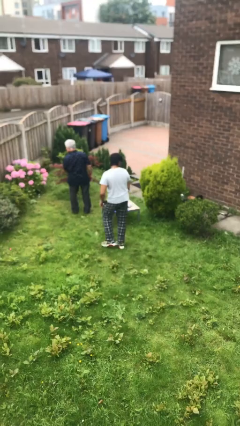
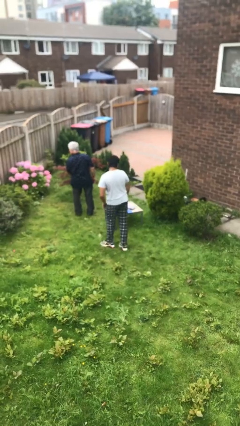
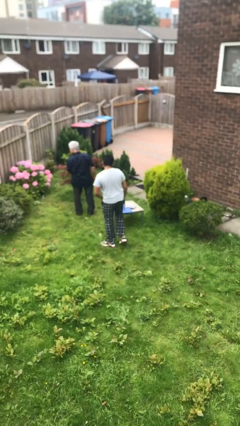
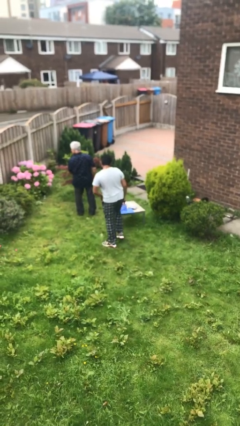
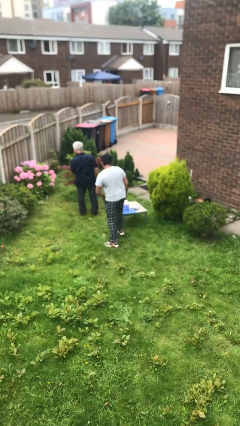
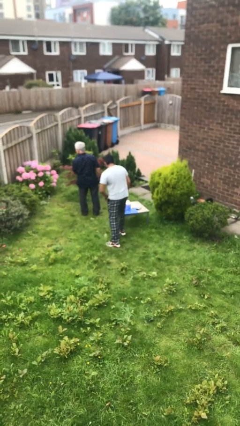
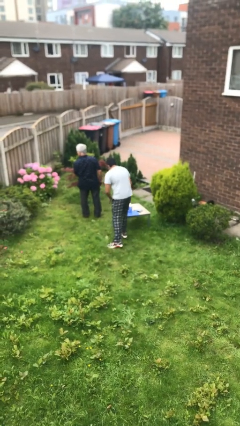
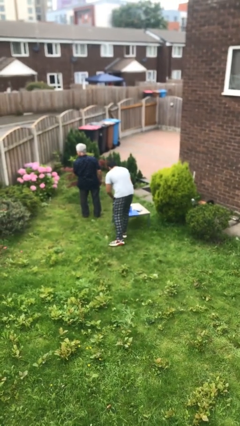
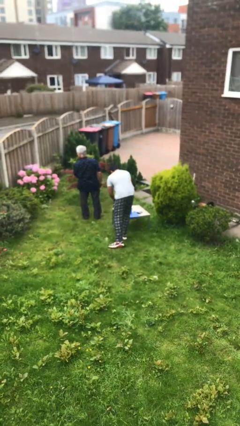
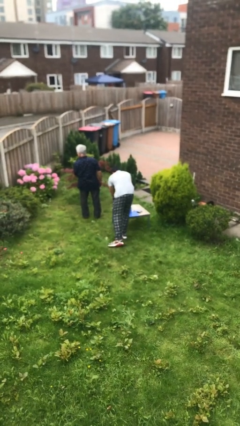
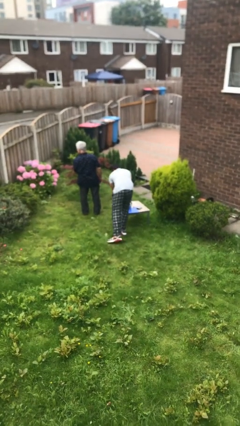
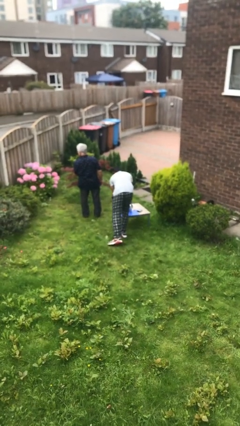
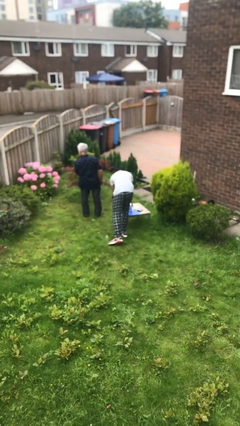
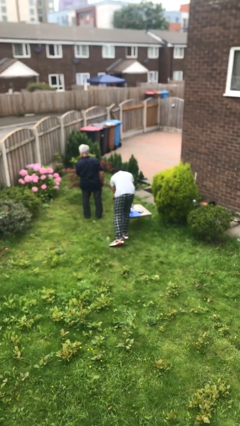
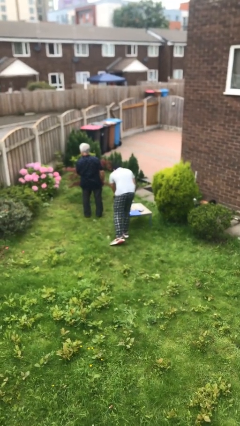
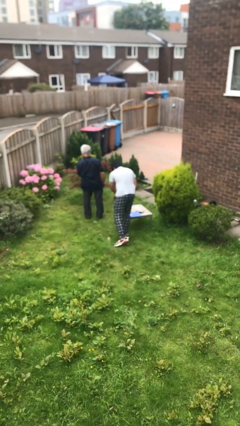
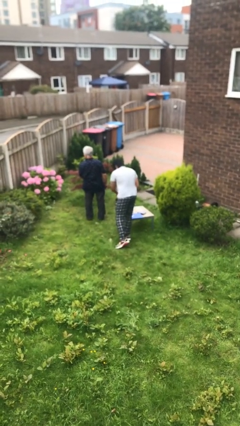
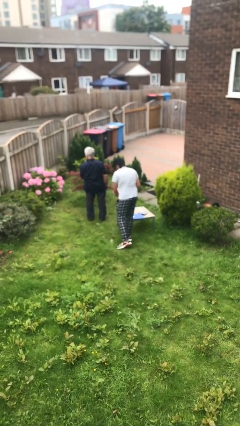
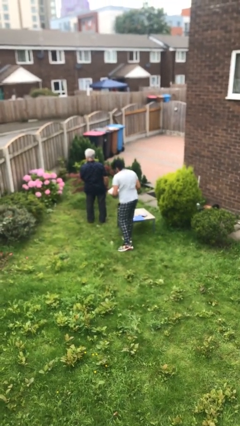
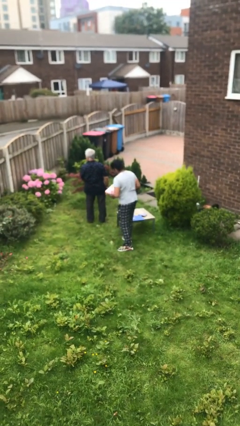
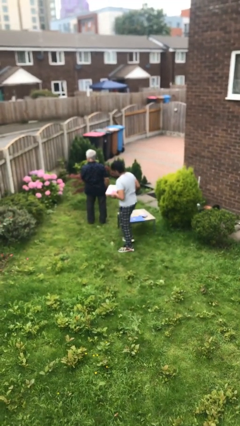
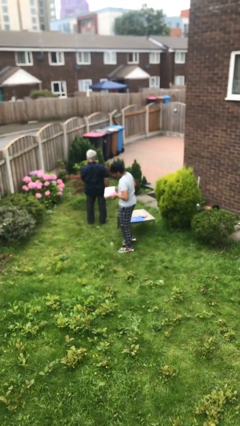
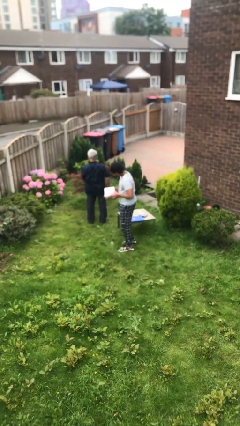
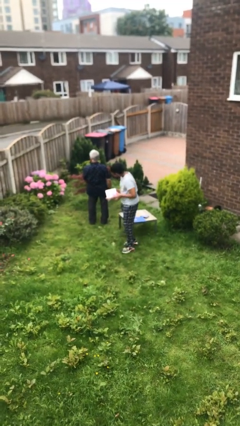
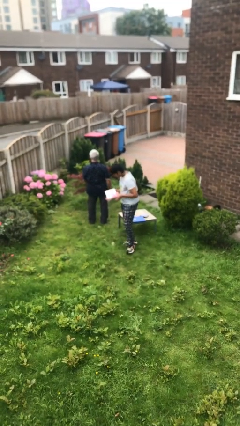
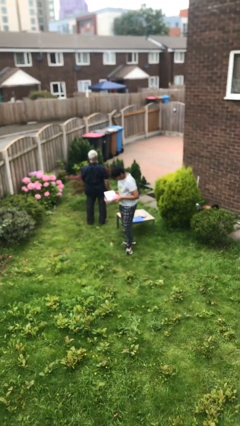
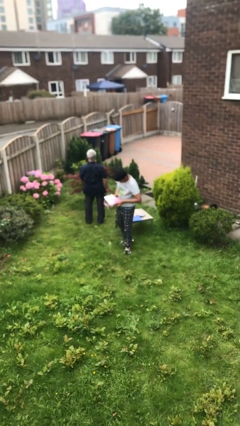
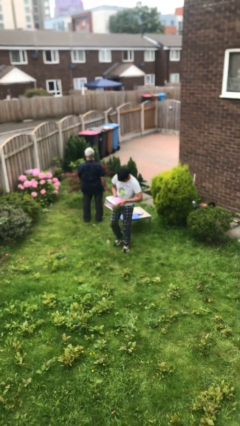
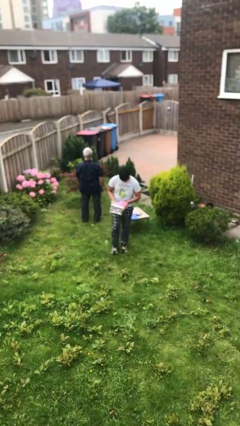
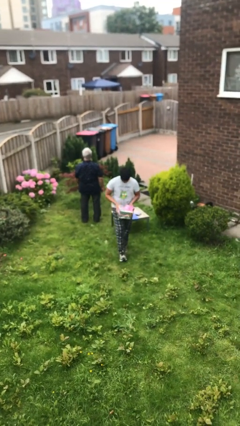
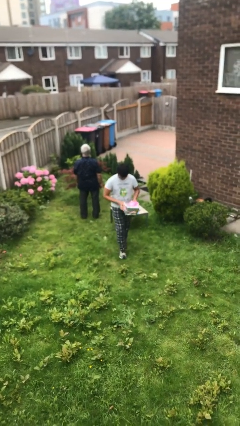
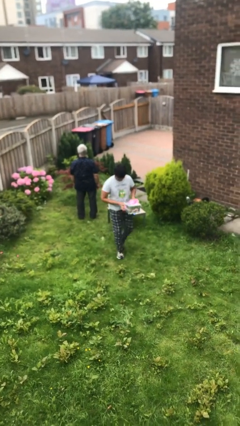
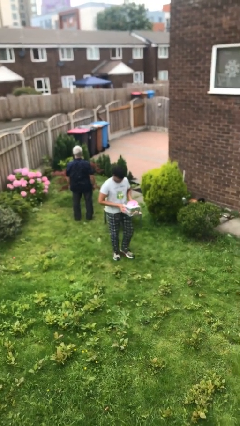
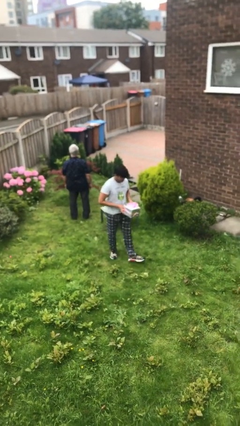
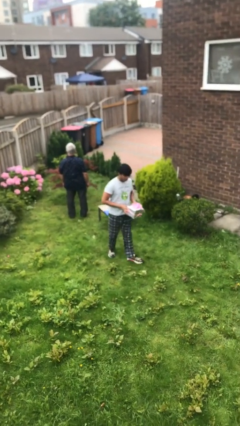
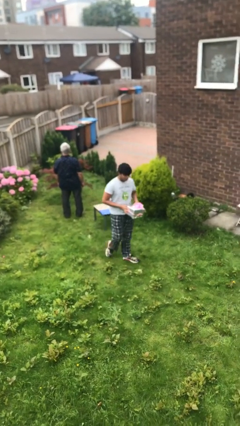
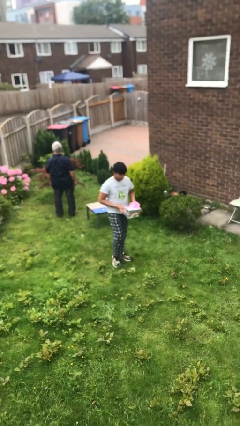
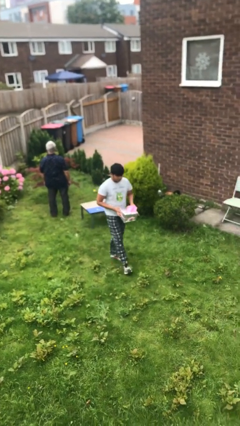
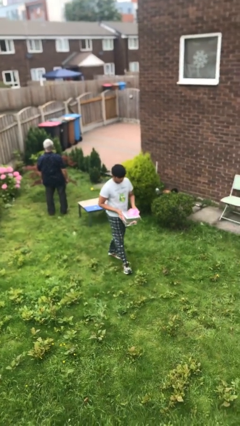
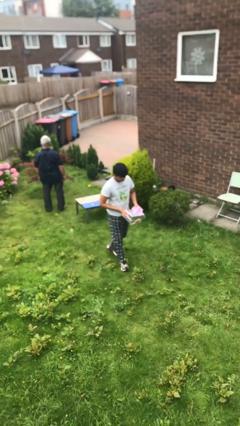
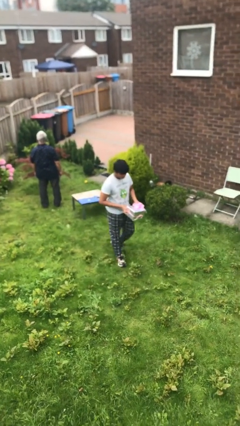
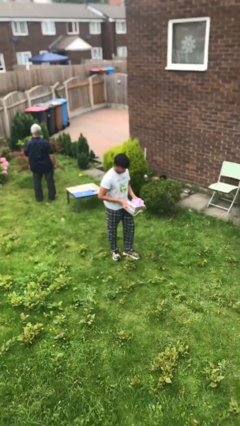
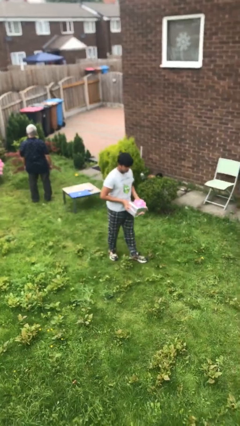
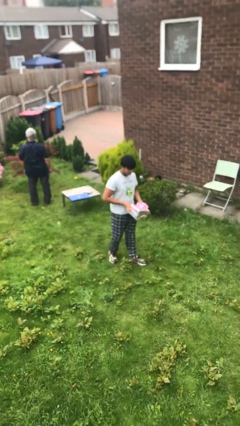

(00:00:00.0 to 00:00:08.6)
person steals object from person

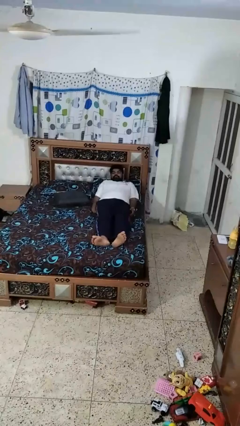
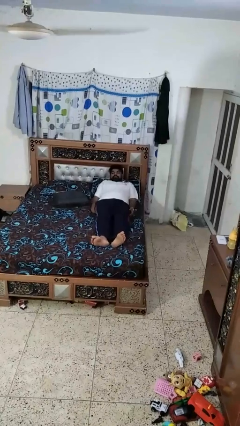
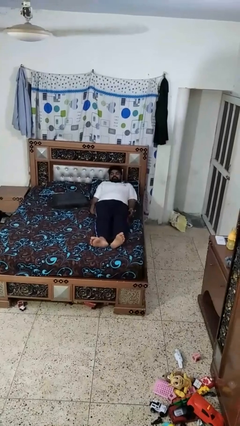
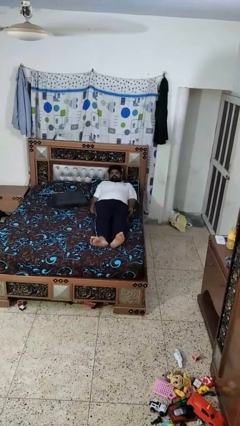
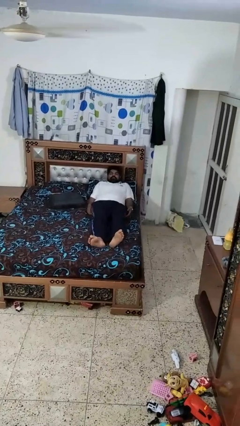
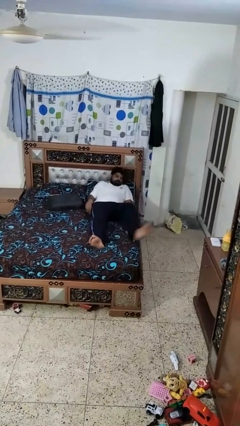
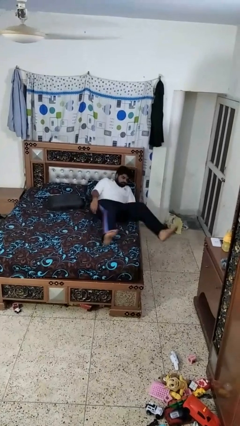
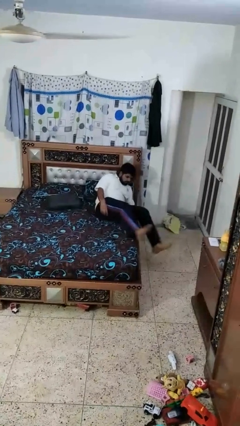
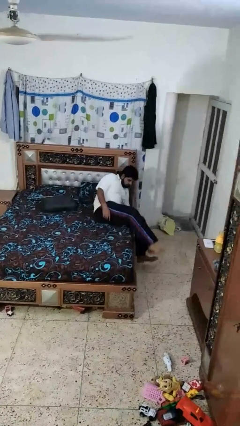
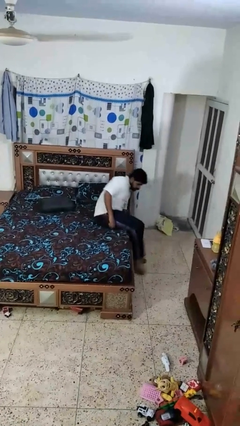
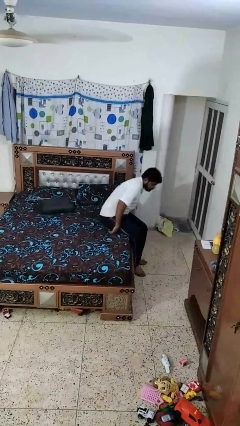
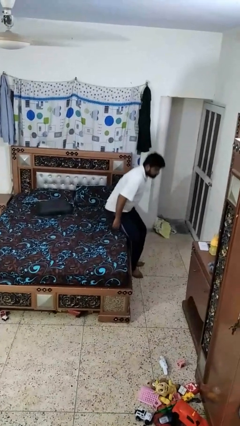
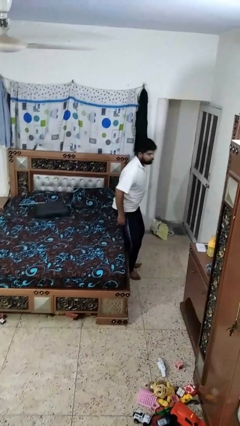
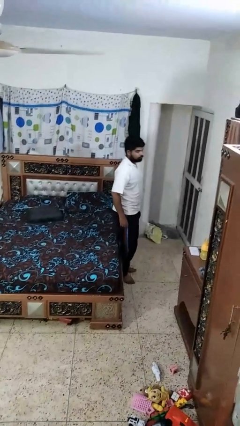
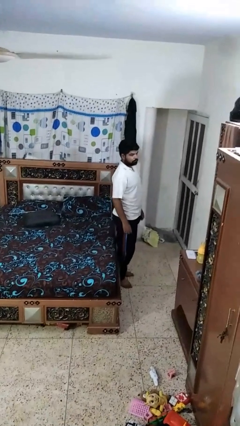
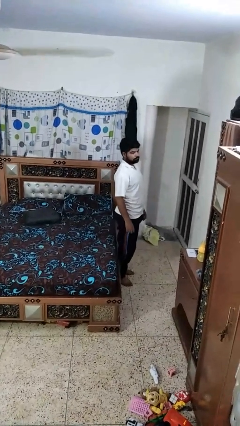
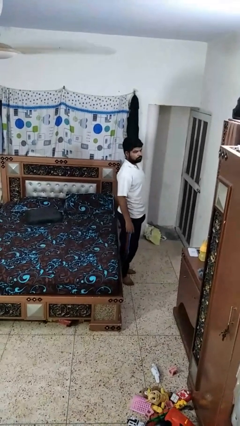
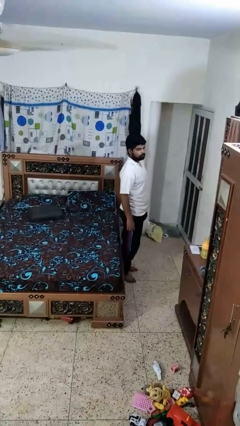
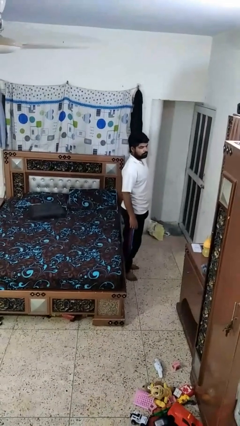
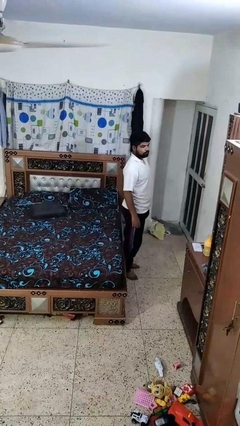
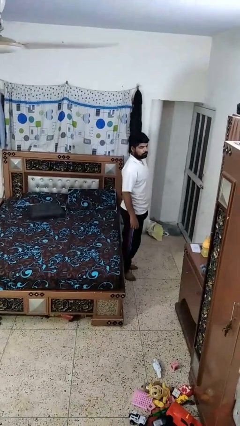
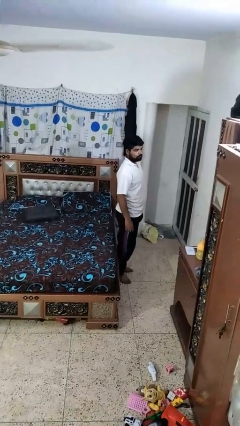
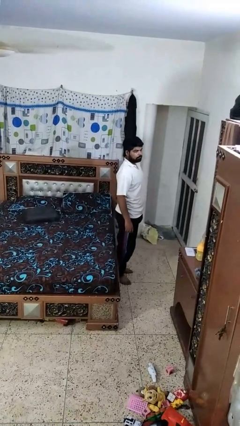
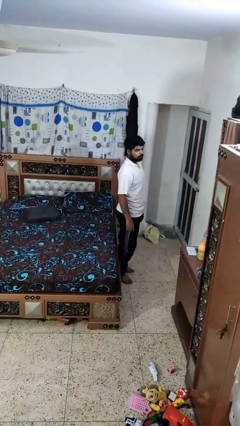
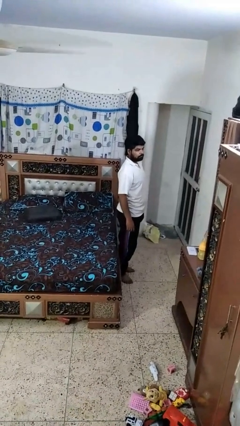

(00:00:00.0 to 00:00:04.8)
person stands up

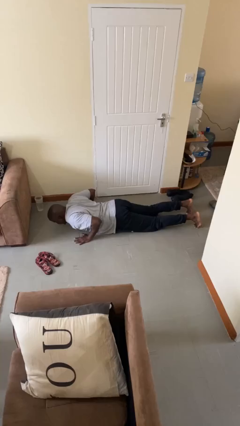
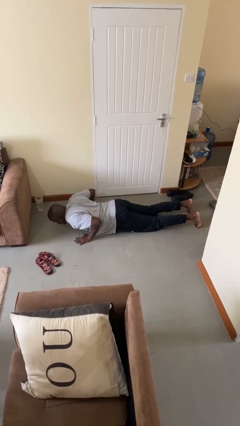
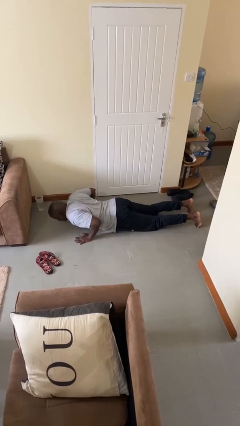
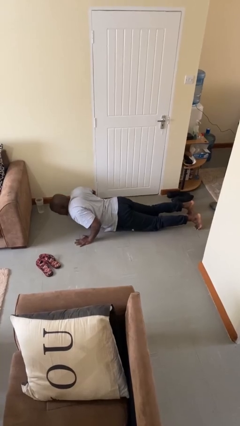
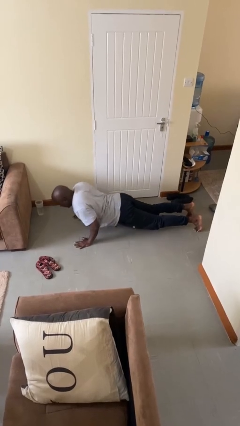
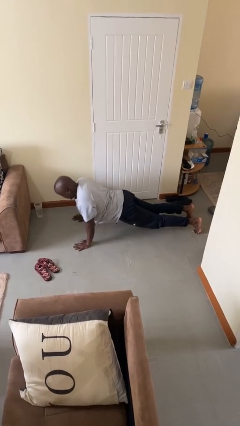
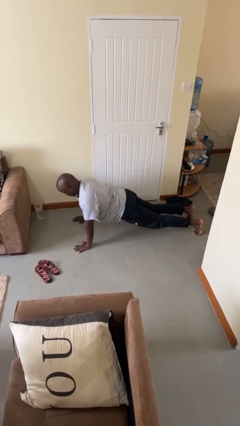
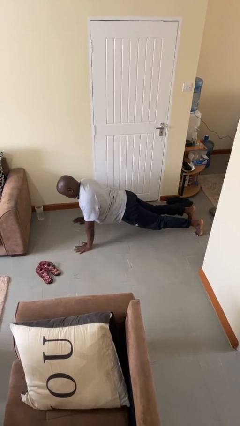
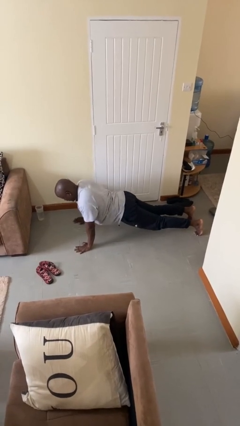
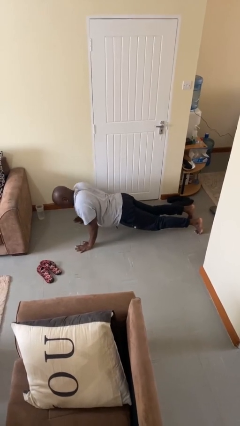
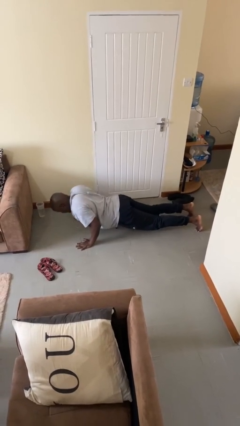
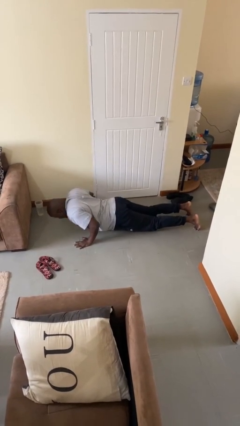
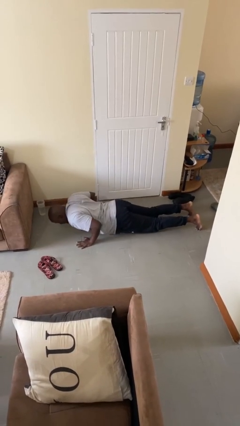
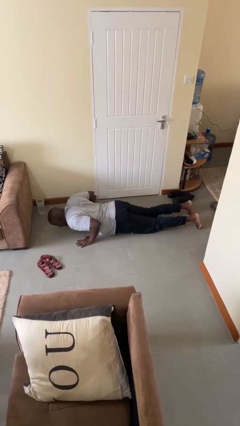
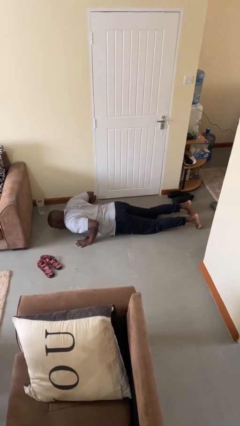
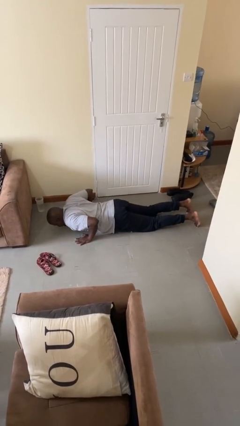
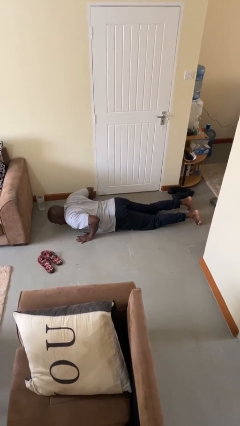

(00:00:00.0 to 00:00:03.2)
person exercises with pushup

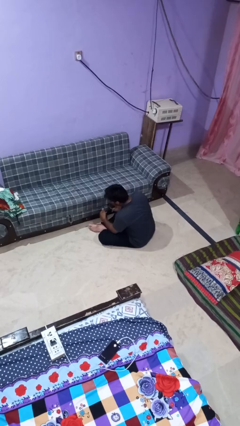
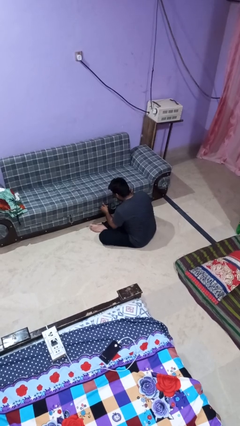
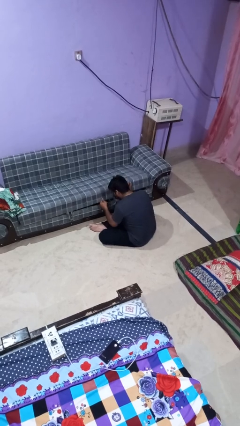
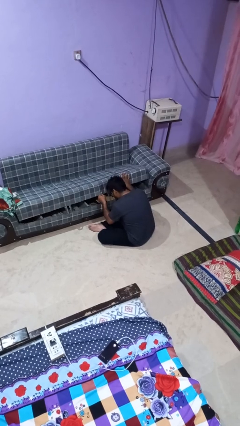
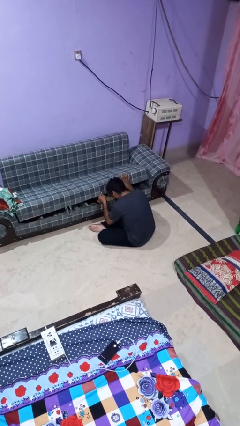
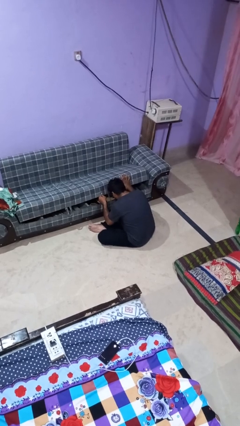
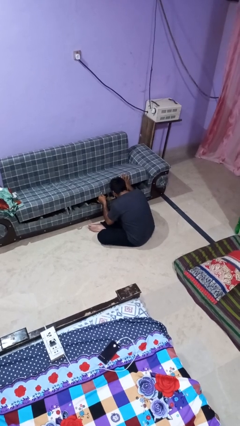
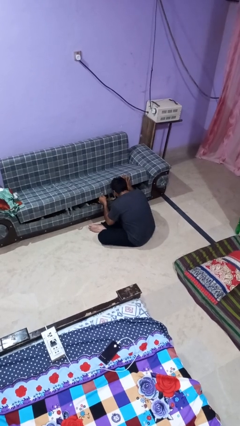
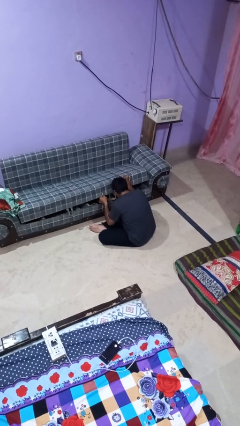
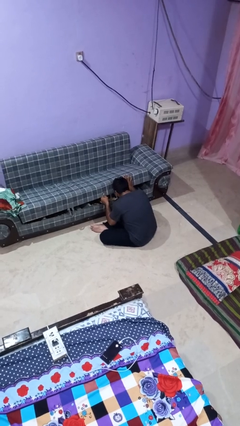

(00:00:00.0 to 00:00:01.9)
person searches under couch
